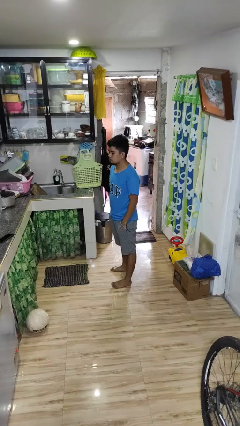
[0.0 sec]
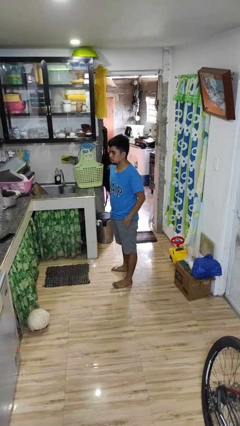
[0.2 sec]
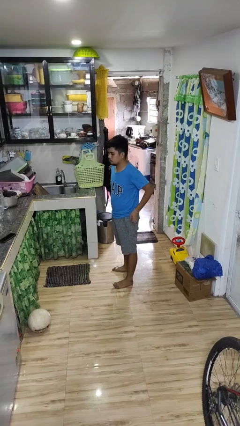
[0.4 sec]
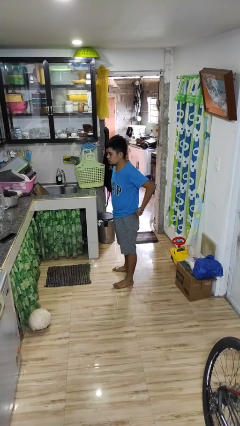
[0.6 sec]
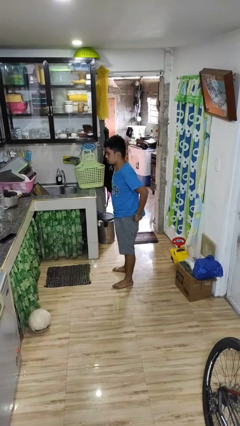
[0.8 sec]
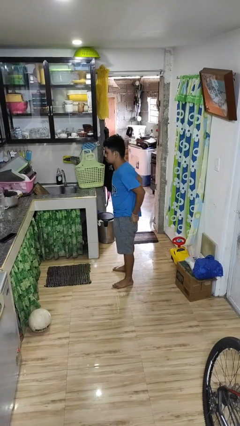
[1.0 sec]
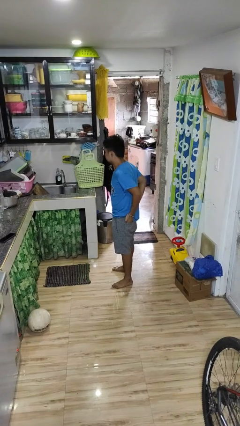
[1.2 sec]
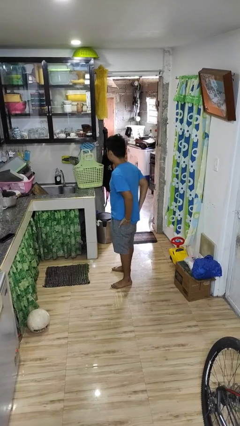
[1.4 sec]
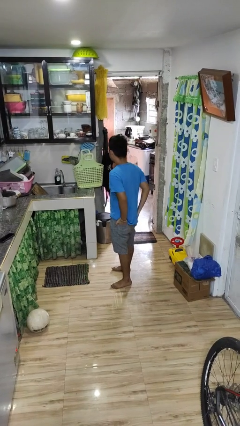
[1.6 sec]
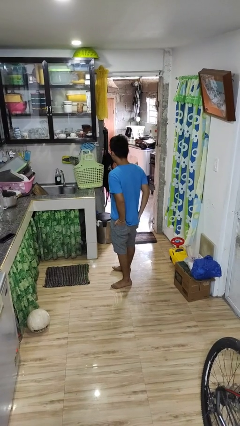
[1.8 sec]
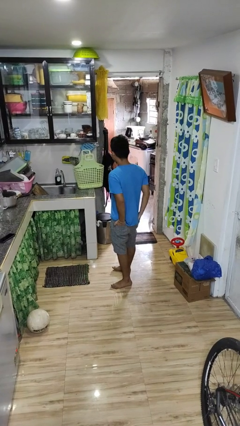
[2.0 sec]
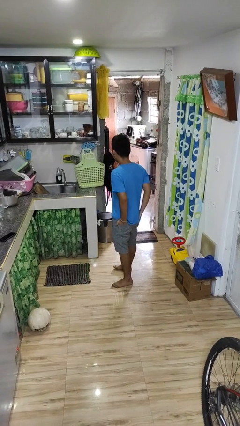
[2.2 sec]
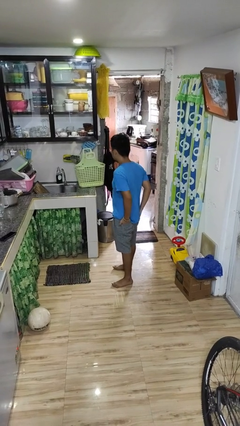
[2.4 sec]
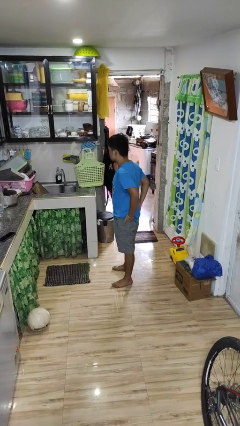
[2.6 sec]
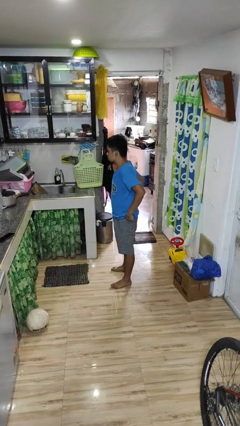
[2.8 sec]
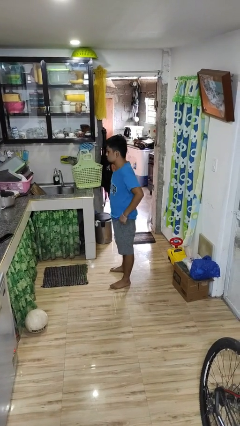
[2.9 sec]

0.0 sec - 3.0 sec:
person puts hands in back pockets

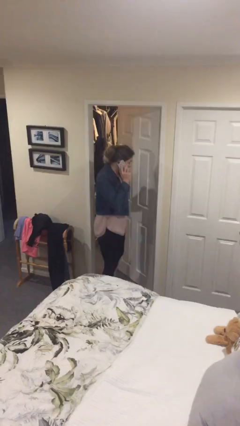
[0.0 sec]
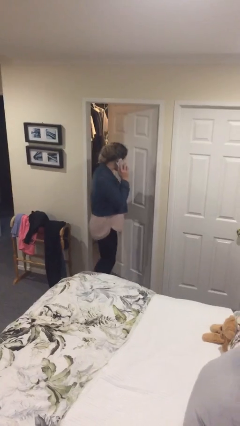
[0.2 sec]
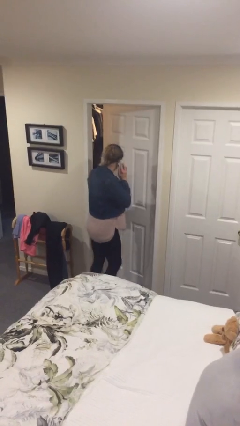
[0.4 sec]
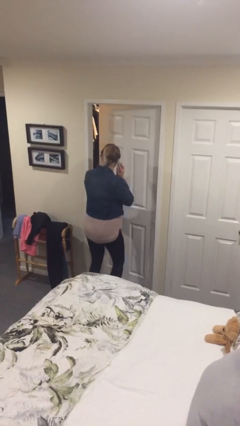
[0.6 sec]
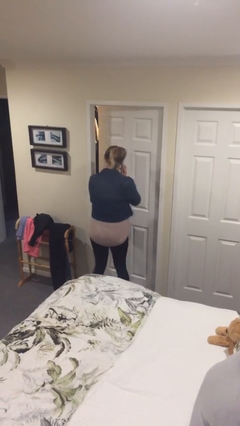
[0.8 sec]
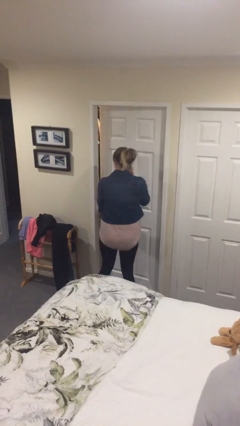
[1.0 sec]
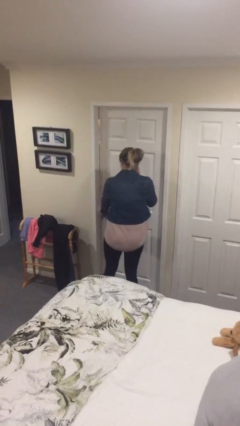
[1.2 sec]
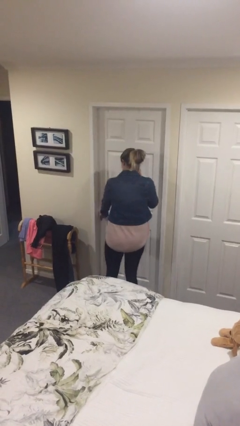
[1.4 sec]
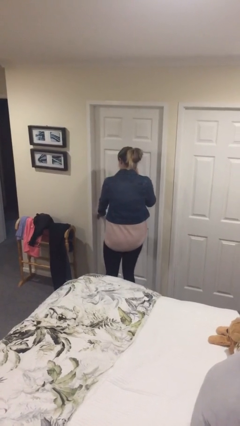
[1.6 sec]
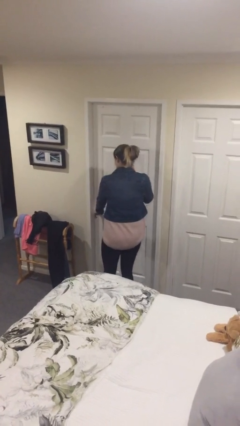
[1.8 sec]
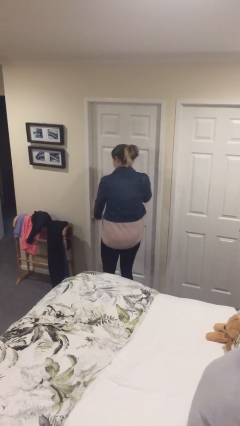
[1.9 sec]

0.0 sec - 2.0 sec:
person closes facility door

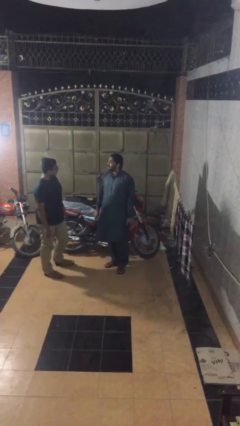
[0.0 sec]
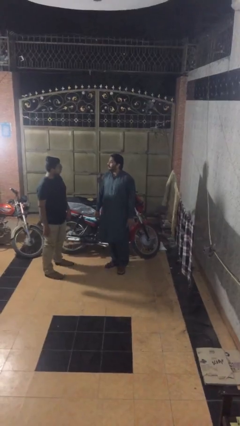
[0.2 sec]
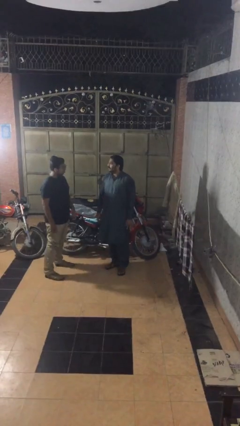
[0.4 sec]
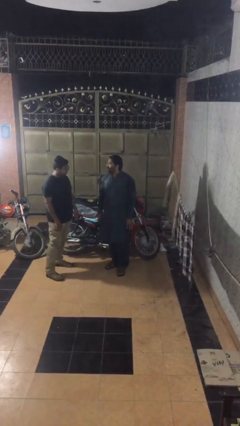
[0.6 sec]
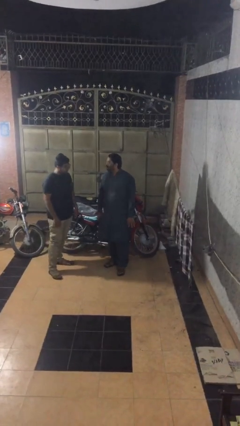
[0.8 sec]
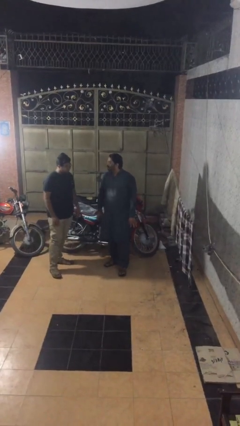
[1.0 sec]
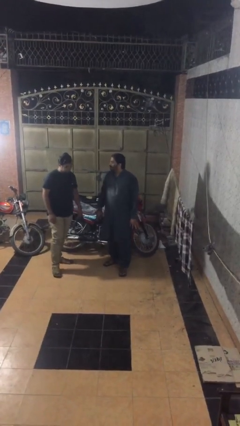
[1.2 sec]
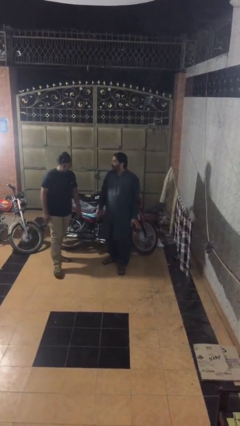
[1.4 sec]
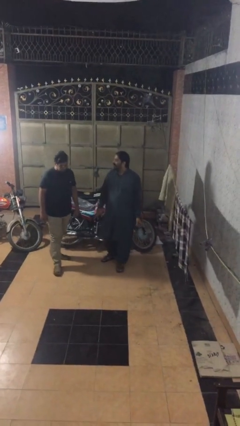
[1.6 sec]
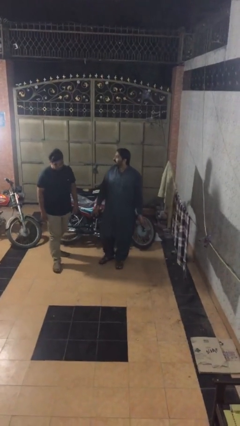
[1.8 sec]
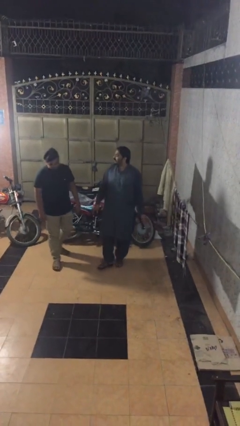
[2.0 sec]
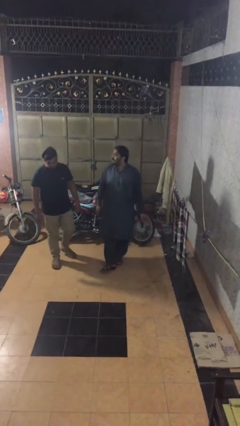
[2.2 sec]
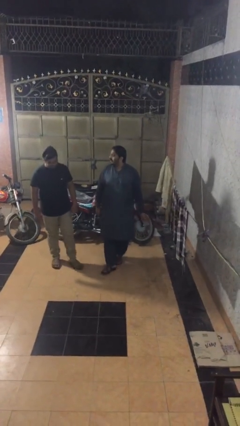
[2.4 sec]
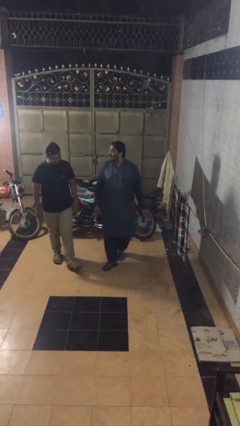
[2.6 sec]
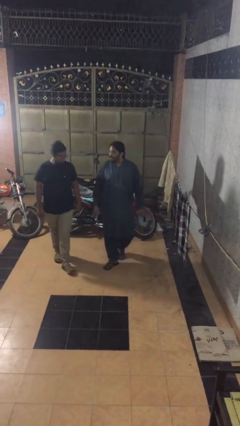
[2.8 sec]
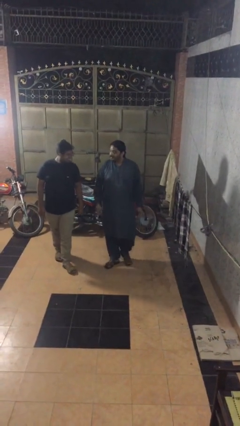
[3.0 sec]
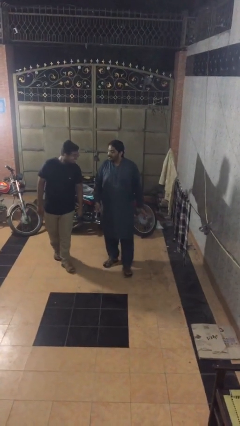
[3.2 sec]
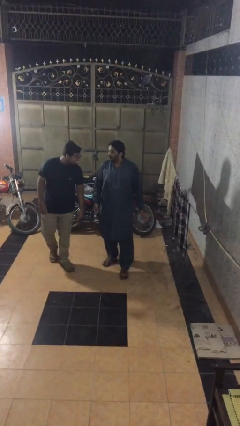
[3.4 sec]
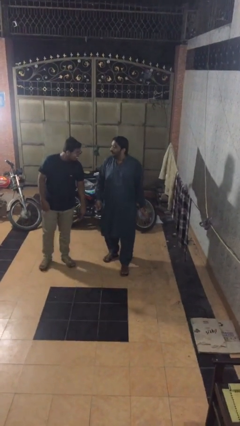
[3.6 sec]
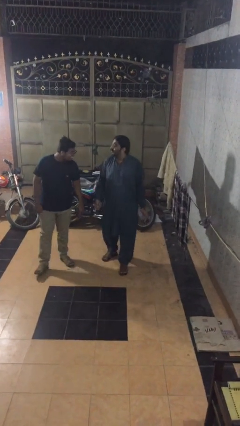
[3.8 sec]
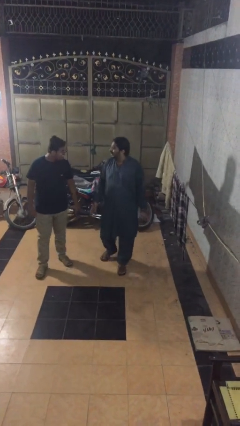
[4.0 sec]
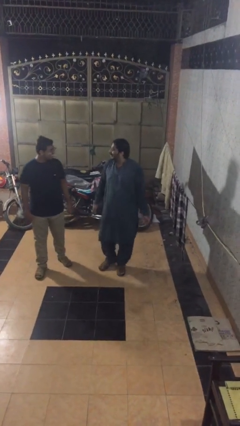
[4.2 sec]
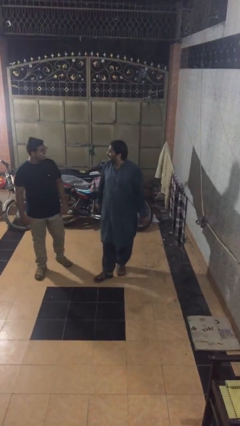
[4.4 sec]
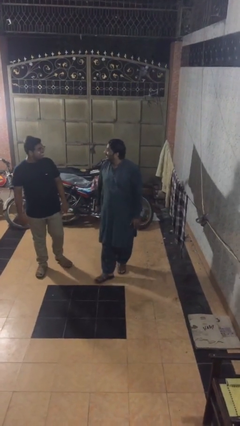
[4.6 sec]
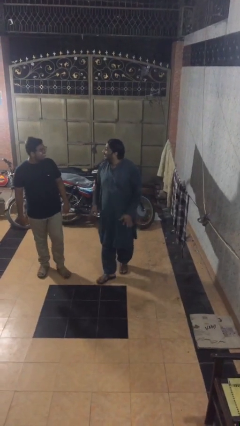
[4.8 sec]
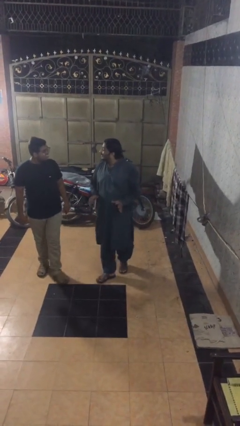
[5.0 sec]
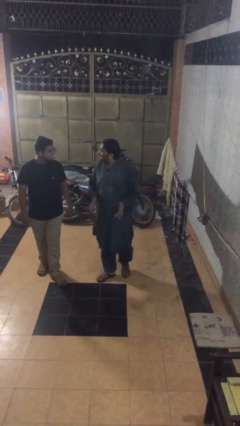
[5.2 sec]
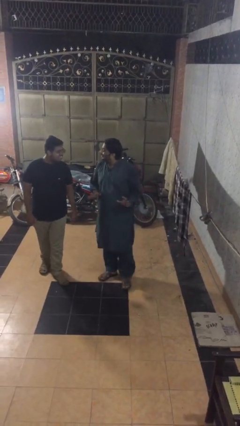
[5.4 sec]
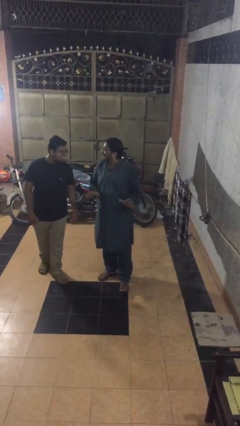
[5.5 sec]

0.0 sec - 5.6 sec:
person talks to person

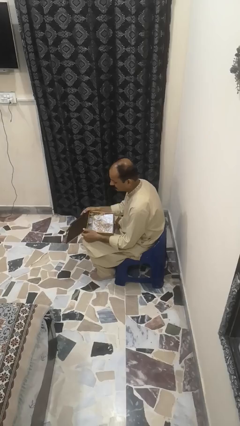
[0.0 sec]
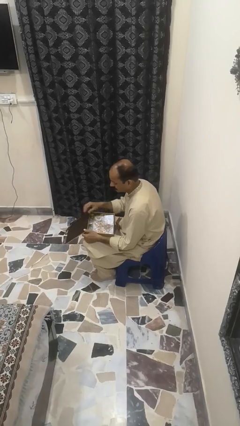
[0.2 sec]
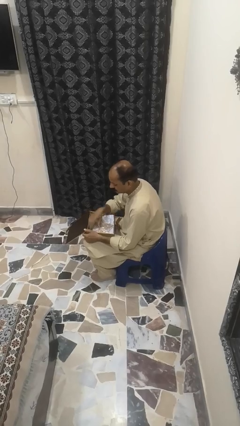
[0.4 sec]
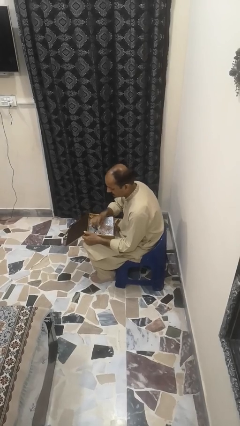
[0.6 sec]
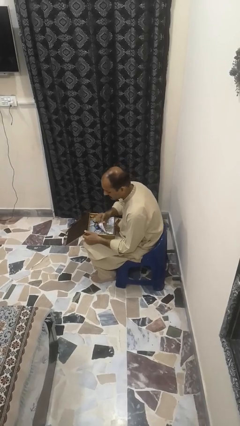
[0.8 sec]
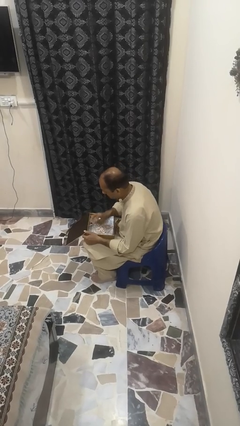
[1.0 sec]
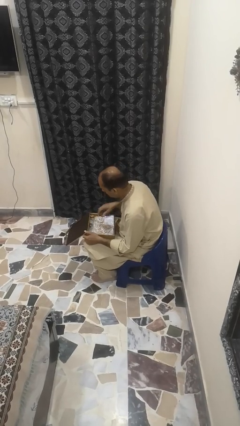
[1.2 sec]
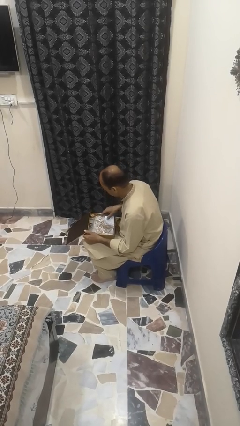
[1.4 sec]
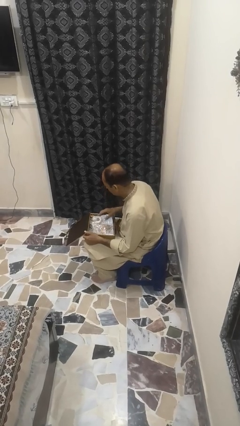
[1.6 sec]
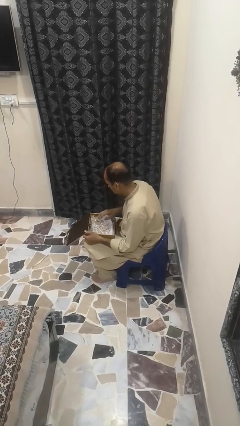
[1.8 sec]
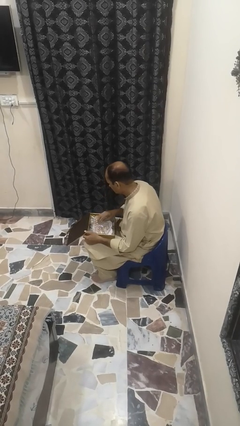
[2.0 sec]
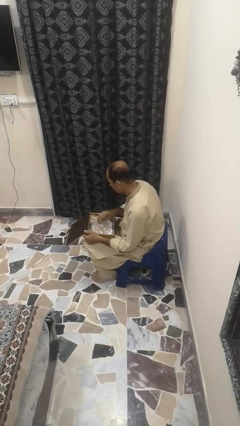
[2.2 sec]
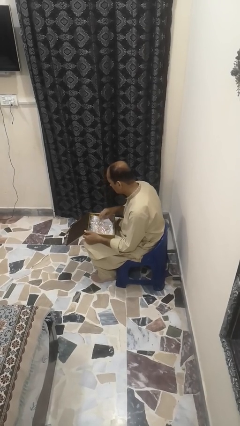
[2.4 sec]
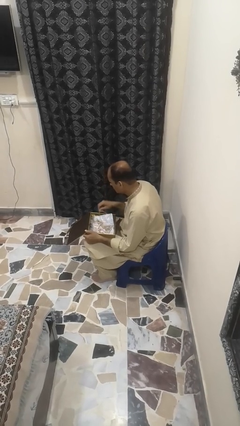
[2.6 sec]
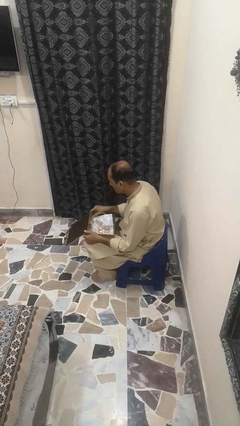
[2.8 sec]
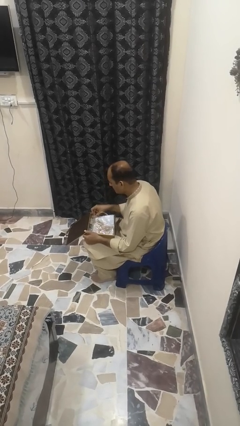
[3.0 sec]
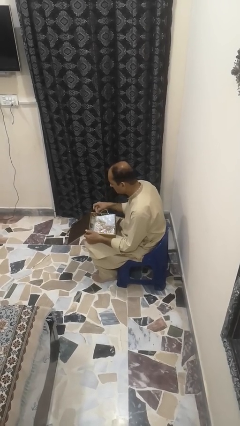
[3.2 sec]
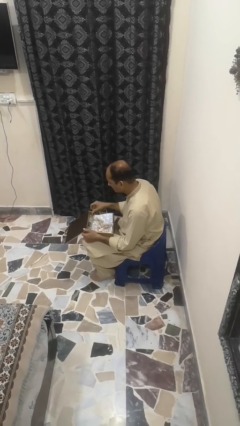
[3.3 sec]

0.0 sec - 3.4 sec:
person searches jewelry box

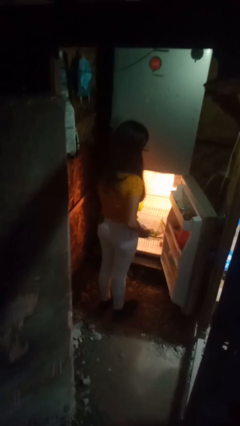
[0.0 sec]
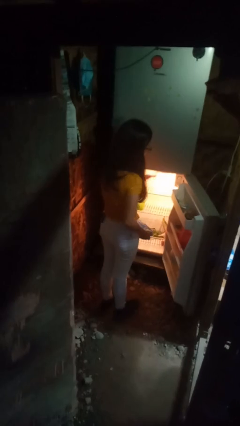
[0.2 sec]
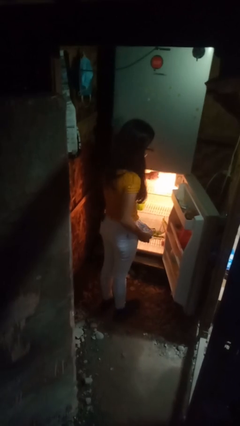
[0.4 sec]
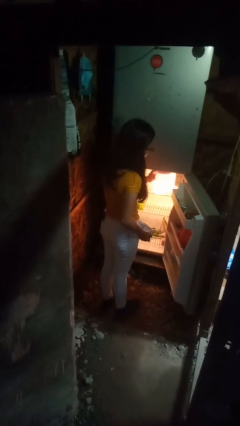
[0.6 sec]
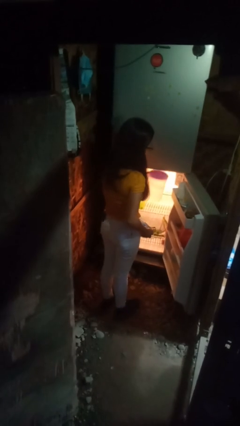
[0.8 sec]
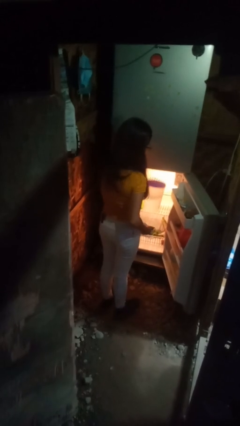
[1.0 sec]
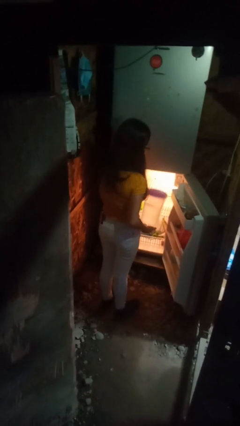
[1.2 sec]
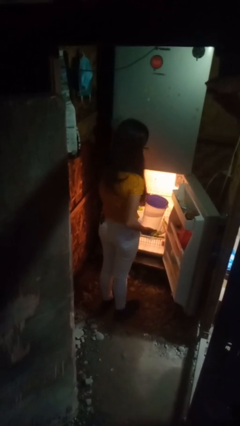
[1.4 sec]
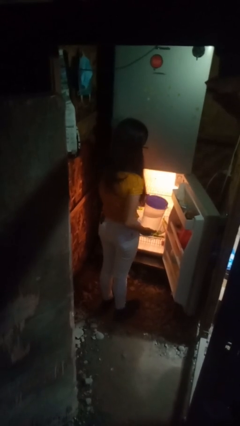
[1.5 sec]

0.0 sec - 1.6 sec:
person takes object from refrigerator

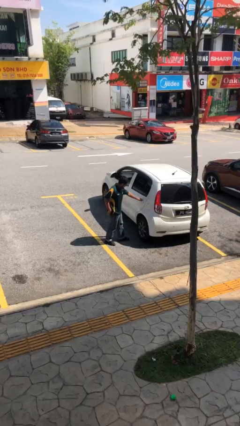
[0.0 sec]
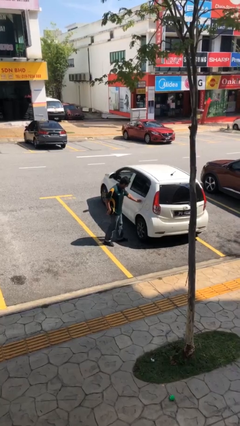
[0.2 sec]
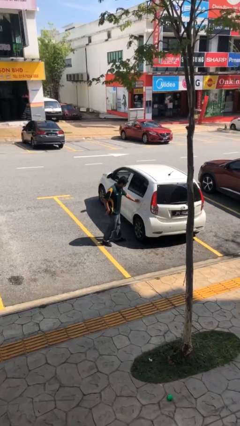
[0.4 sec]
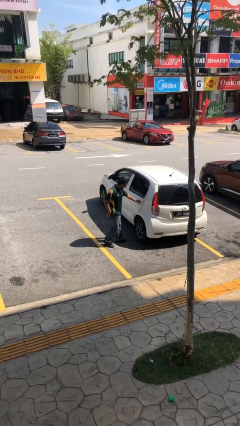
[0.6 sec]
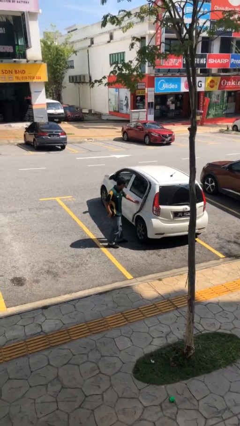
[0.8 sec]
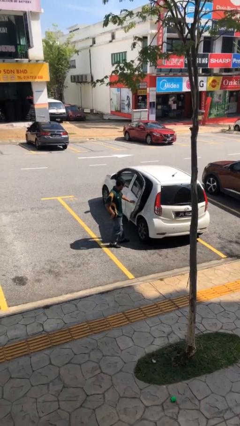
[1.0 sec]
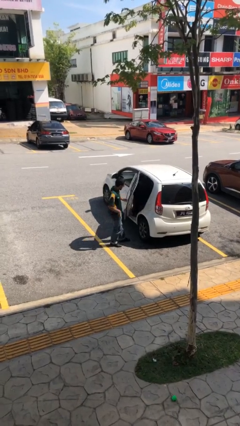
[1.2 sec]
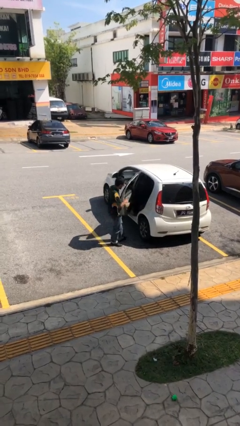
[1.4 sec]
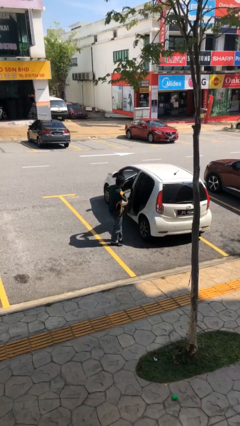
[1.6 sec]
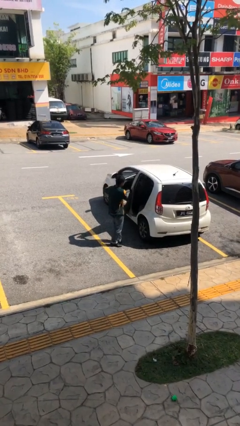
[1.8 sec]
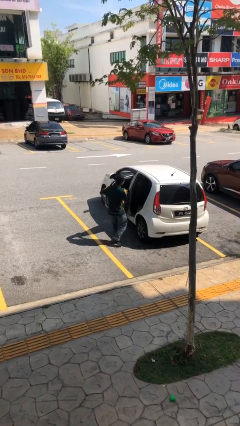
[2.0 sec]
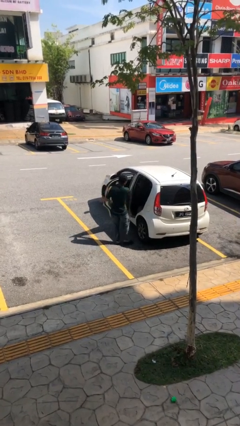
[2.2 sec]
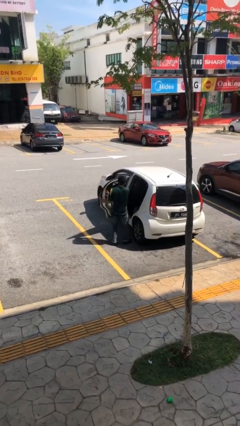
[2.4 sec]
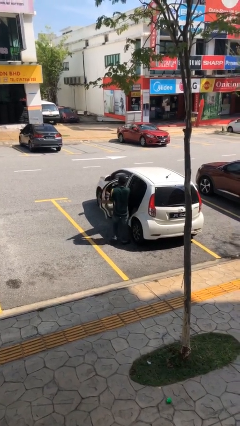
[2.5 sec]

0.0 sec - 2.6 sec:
person opens car door
